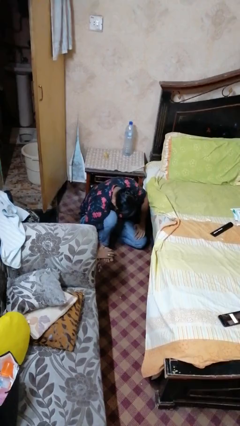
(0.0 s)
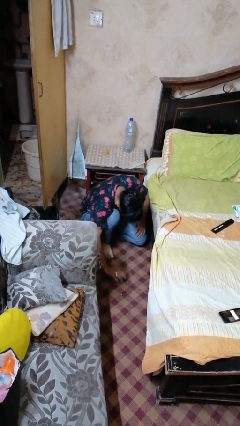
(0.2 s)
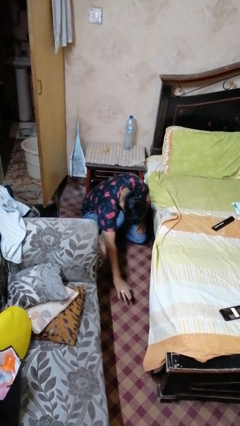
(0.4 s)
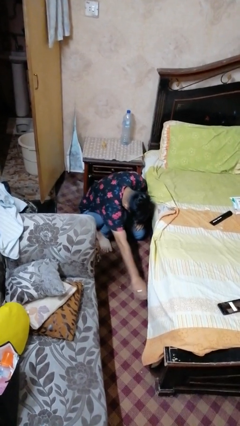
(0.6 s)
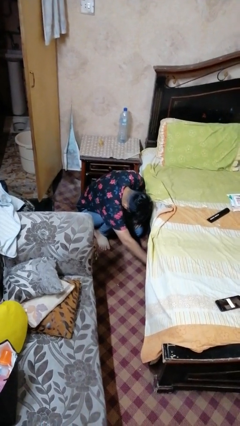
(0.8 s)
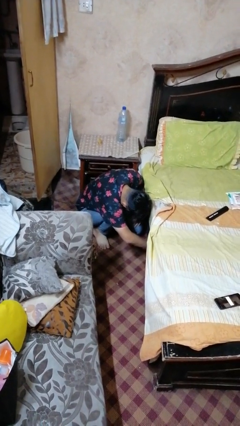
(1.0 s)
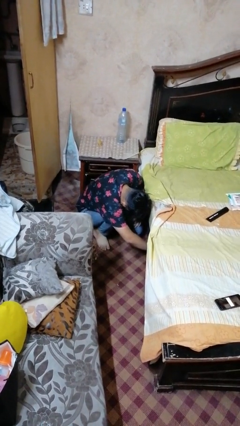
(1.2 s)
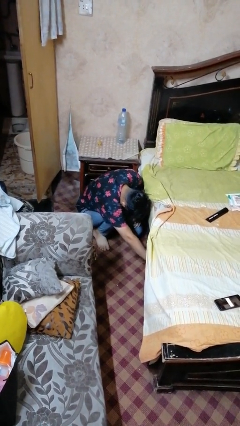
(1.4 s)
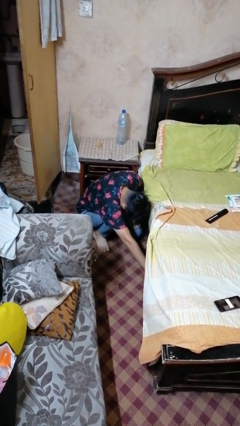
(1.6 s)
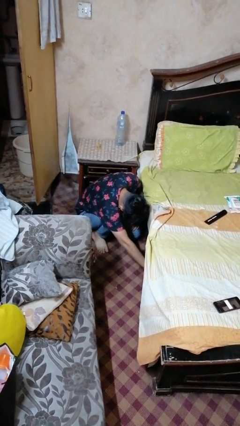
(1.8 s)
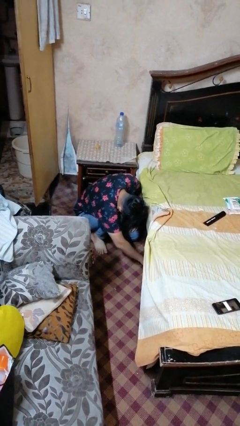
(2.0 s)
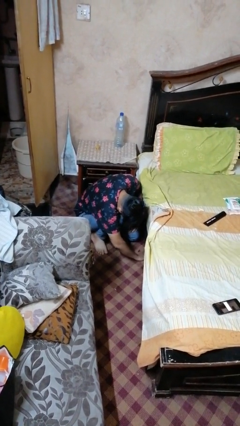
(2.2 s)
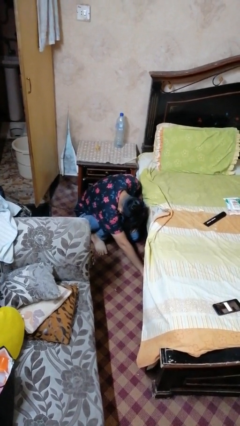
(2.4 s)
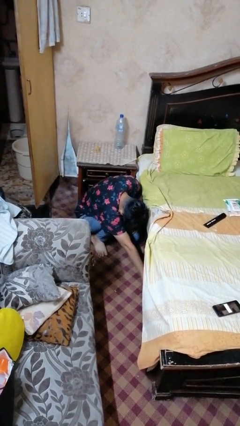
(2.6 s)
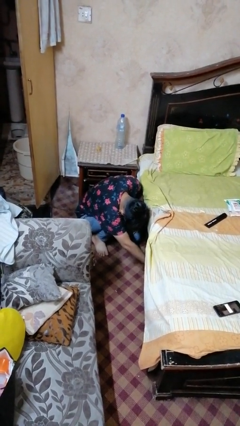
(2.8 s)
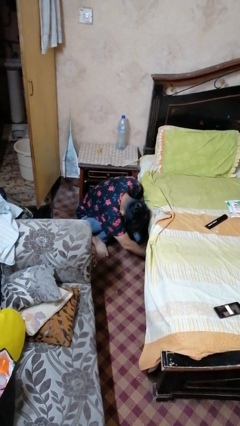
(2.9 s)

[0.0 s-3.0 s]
person searches under bed

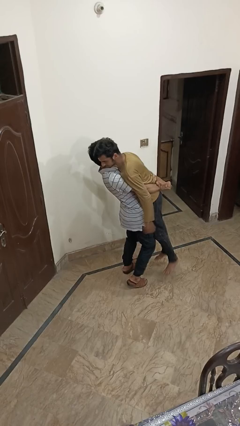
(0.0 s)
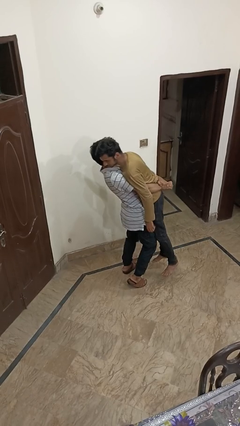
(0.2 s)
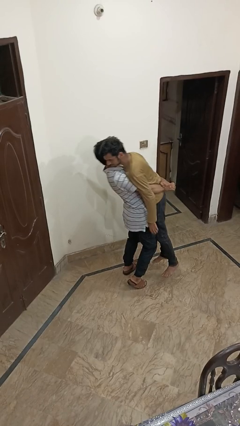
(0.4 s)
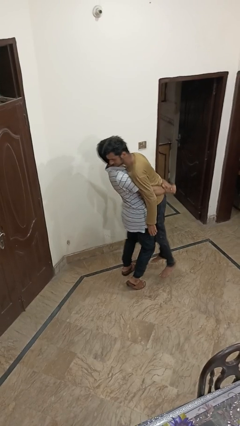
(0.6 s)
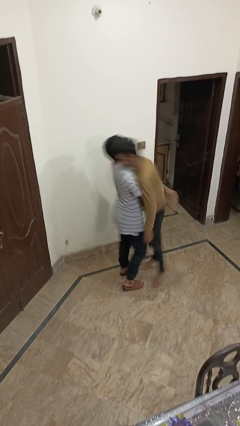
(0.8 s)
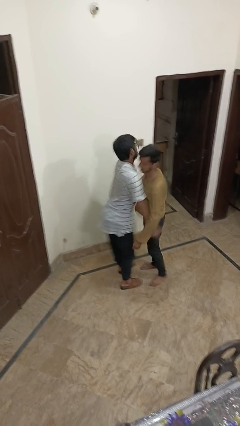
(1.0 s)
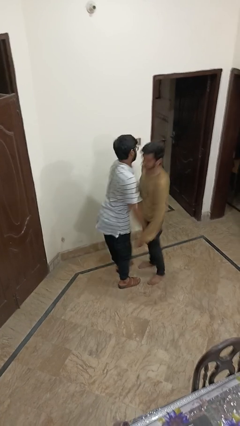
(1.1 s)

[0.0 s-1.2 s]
person puts down person

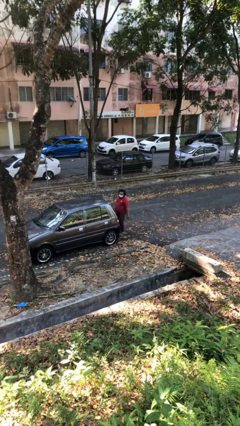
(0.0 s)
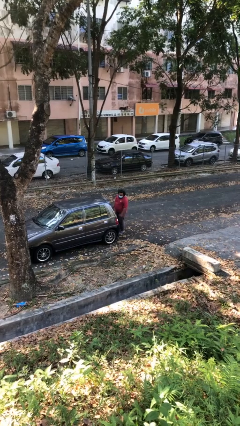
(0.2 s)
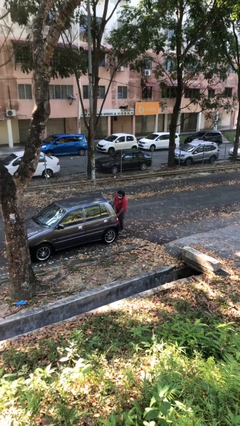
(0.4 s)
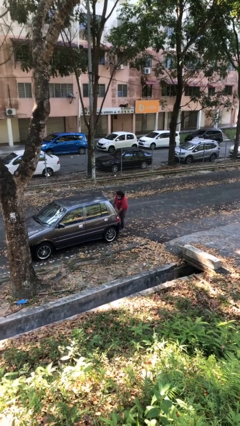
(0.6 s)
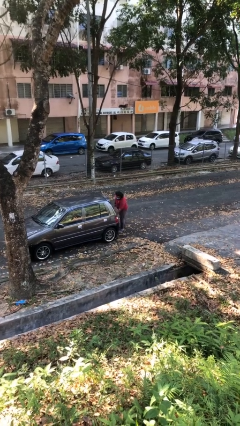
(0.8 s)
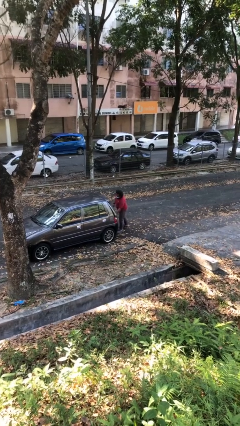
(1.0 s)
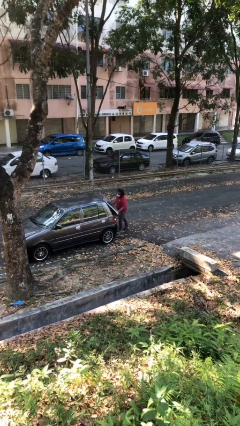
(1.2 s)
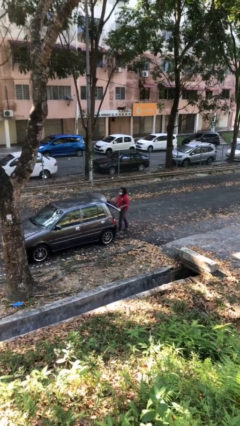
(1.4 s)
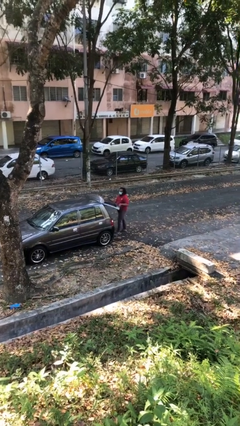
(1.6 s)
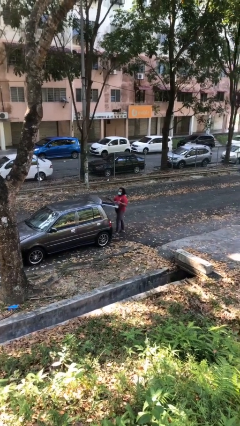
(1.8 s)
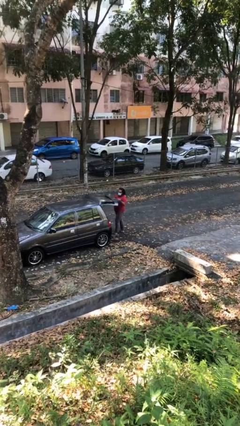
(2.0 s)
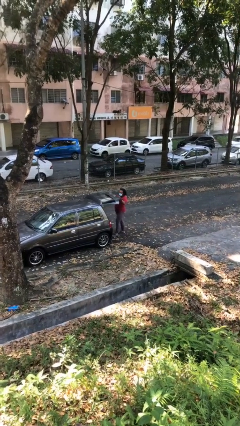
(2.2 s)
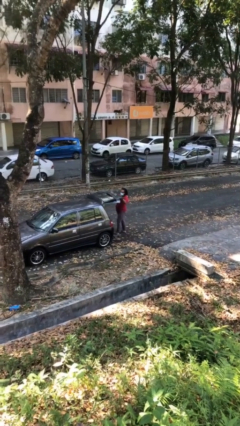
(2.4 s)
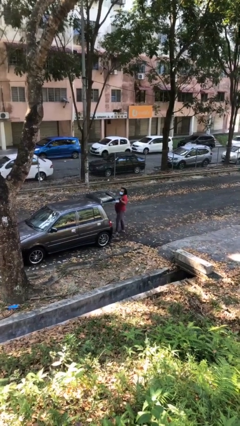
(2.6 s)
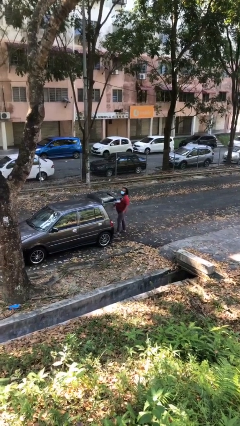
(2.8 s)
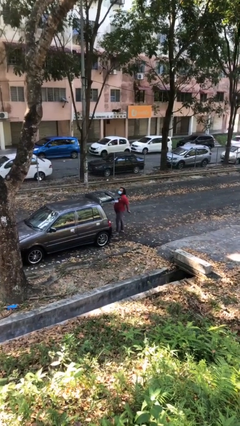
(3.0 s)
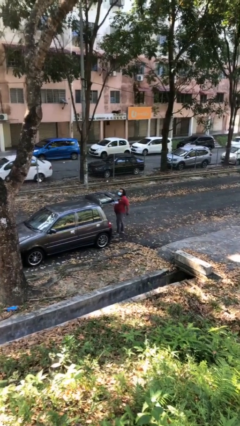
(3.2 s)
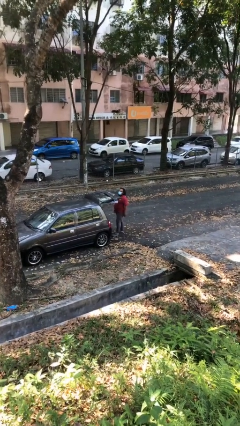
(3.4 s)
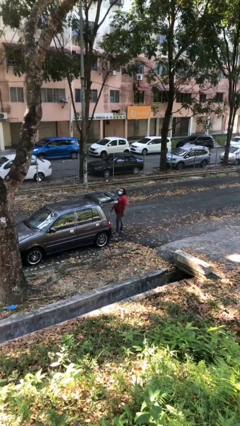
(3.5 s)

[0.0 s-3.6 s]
person opens car trunk

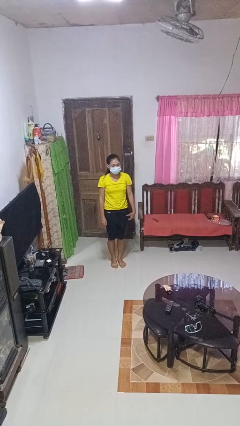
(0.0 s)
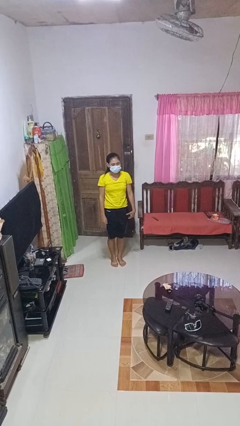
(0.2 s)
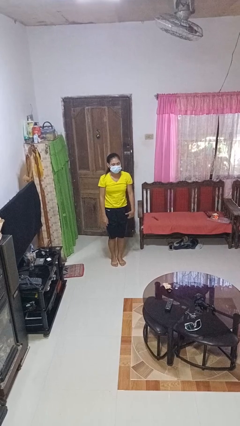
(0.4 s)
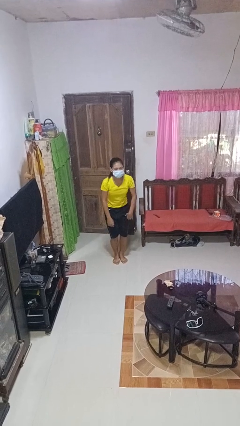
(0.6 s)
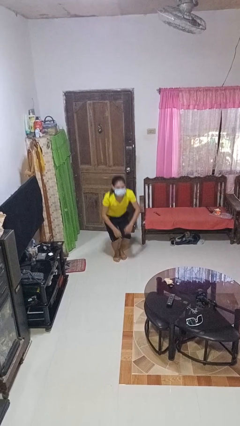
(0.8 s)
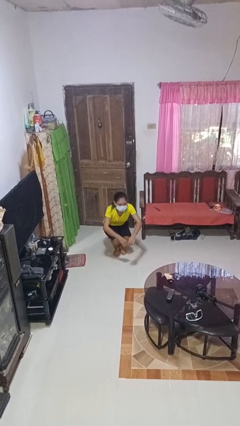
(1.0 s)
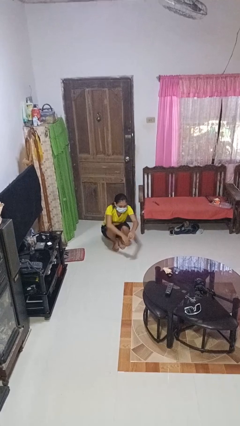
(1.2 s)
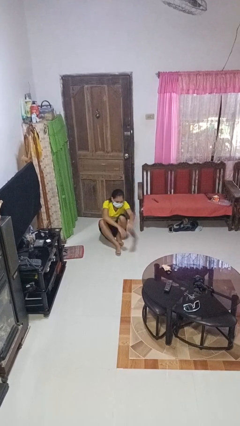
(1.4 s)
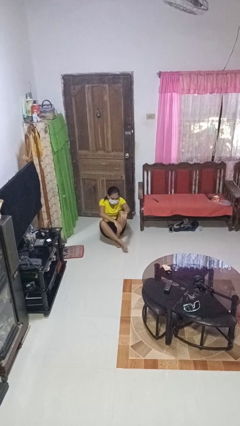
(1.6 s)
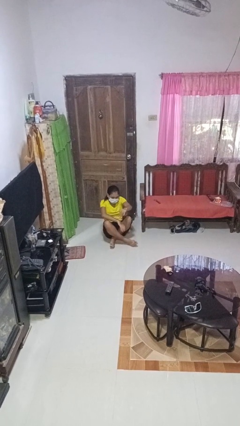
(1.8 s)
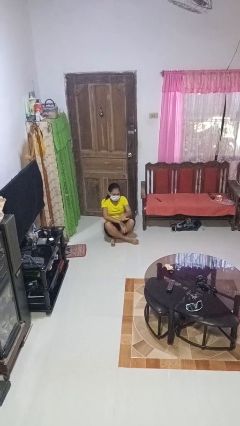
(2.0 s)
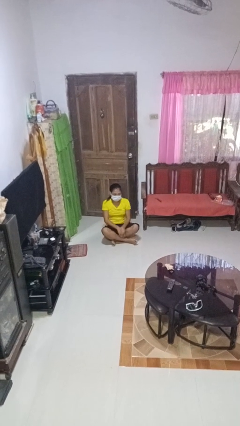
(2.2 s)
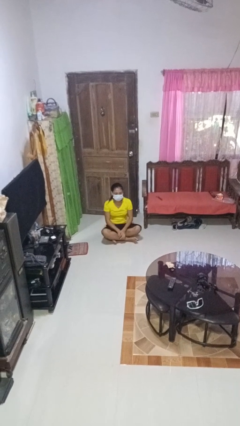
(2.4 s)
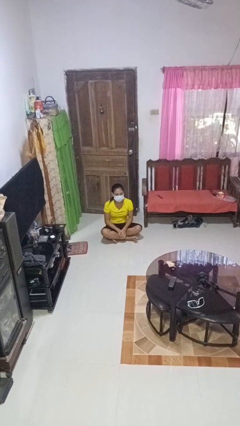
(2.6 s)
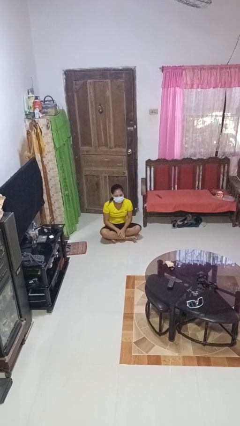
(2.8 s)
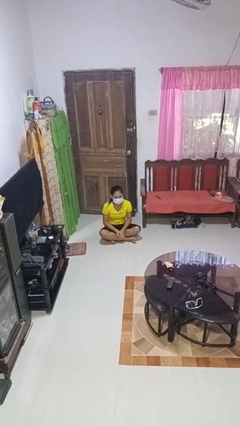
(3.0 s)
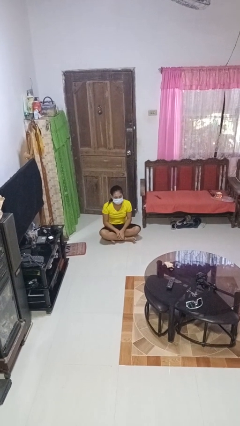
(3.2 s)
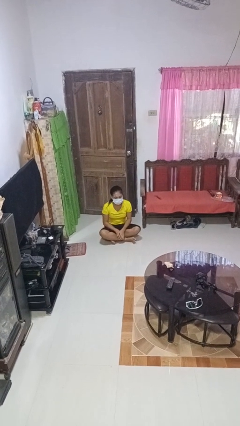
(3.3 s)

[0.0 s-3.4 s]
person sits crisscross

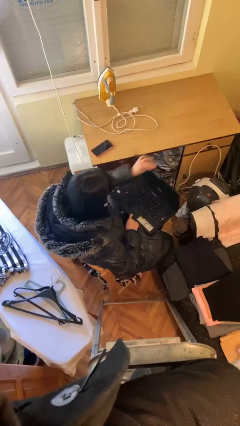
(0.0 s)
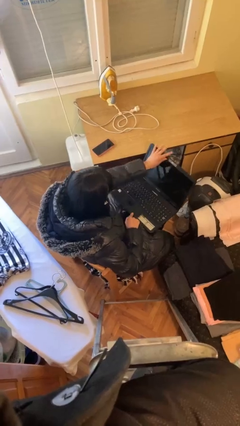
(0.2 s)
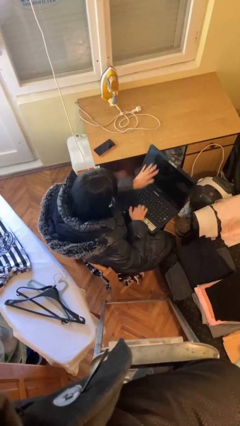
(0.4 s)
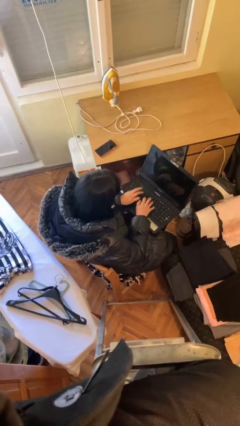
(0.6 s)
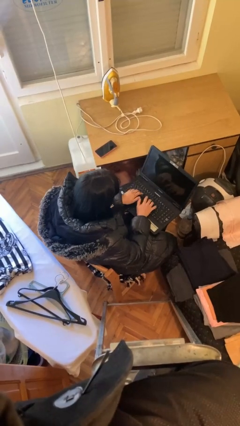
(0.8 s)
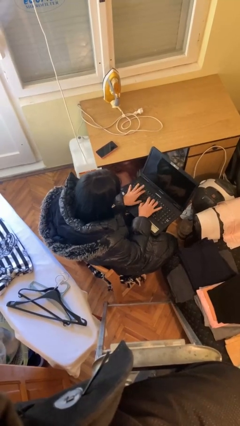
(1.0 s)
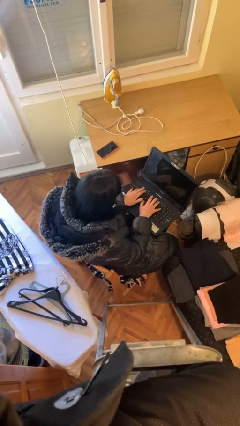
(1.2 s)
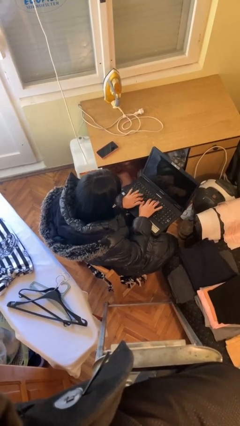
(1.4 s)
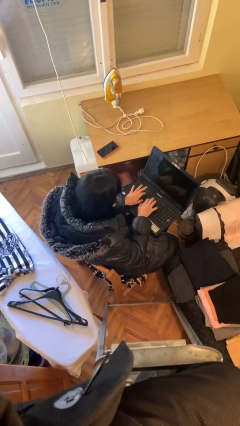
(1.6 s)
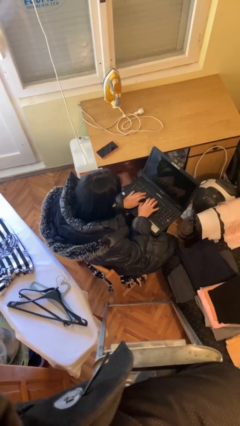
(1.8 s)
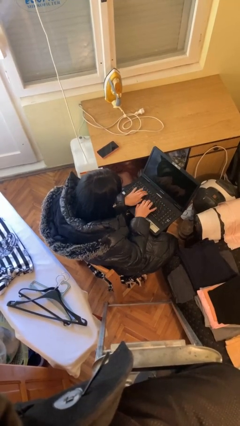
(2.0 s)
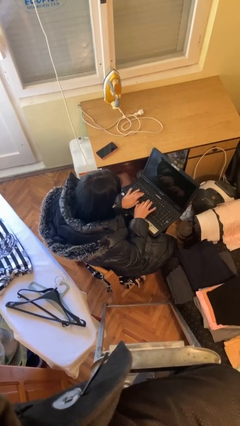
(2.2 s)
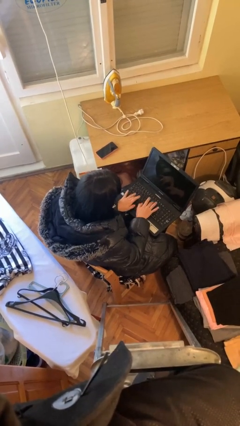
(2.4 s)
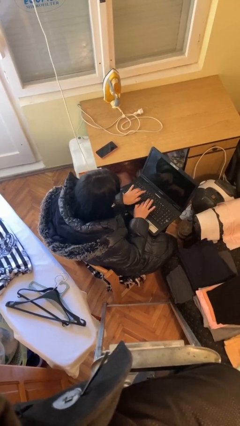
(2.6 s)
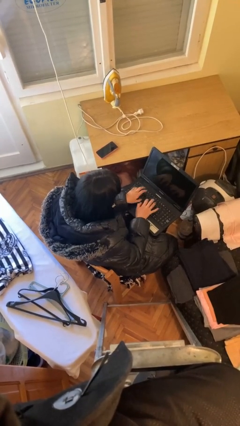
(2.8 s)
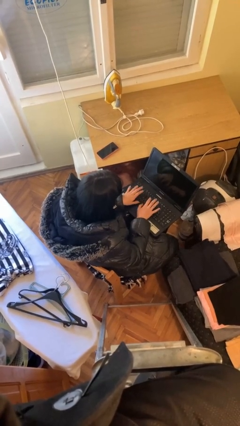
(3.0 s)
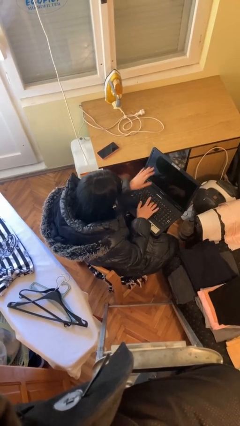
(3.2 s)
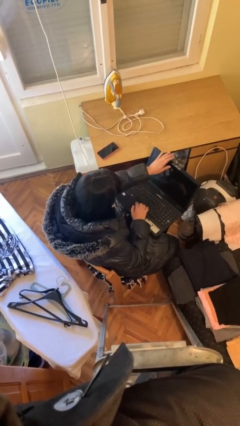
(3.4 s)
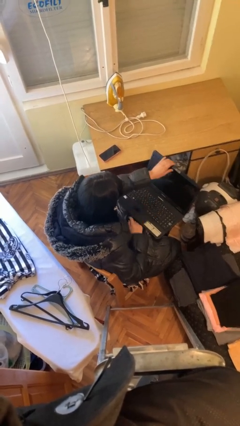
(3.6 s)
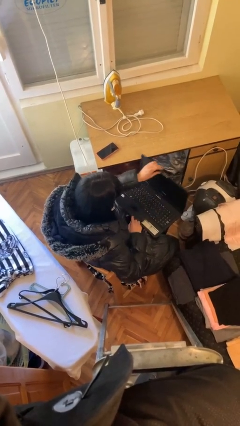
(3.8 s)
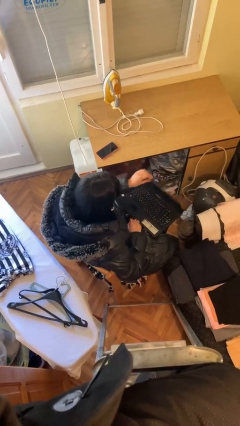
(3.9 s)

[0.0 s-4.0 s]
person interacts with laptop

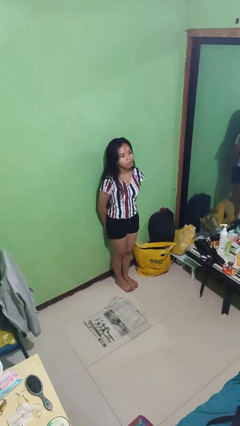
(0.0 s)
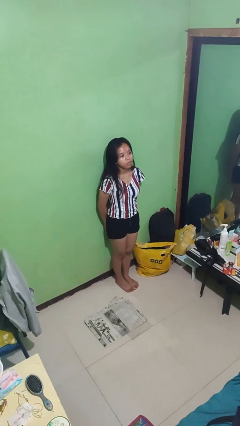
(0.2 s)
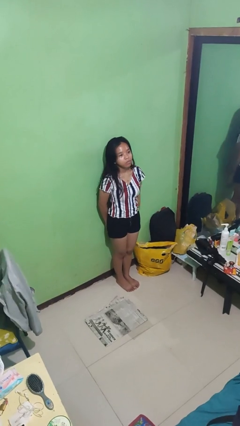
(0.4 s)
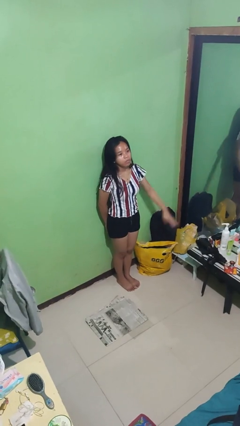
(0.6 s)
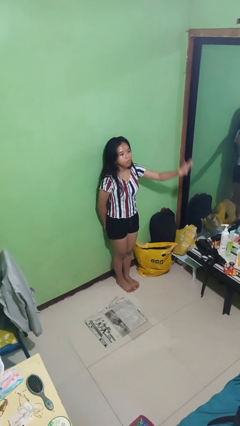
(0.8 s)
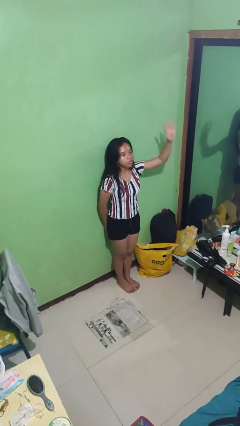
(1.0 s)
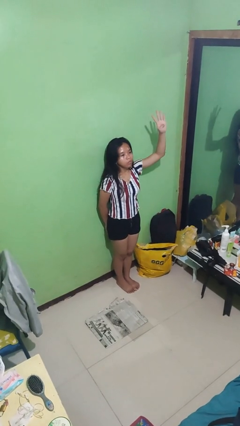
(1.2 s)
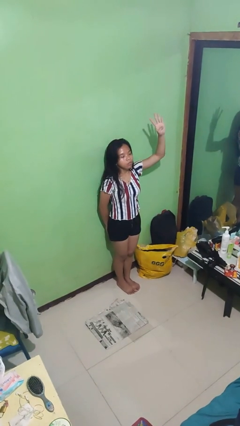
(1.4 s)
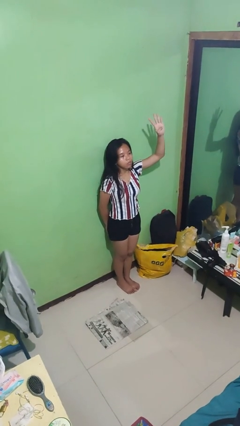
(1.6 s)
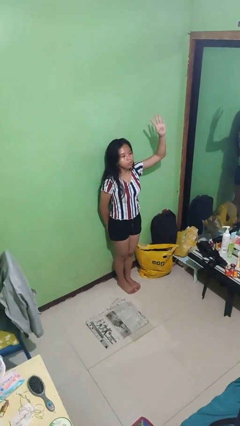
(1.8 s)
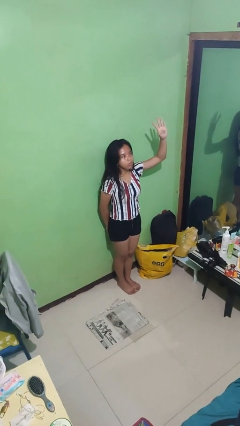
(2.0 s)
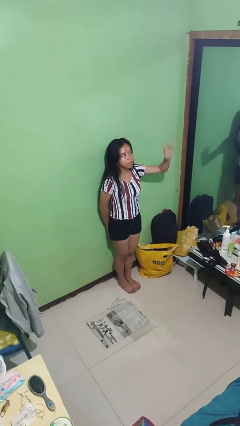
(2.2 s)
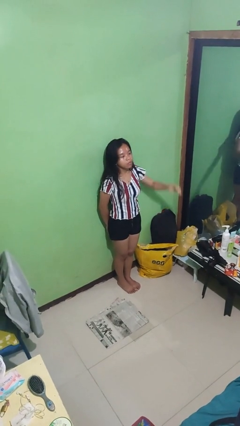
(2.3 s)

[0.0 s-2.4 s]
person gestures number four

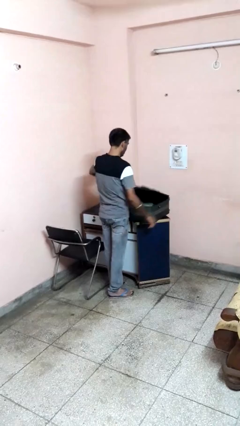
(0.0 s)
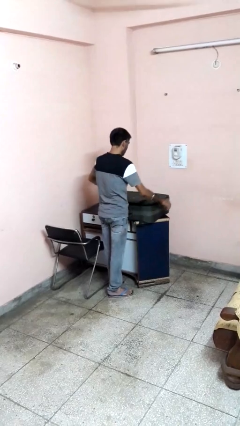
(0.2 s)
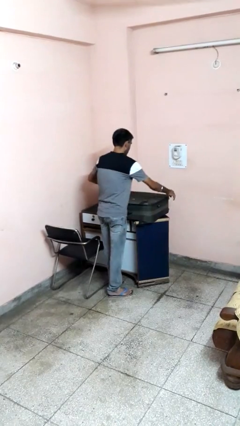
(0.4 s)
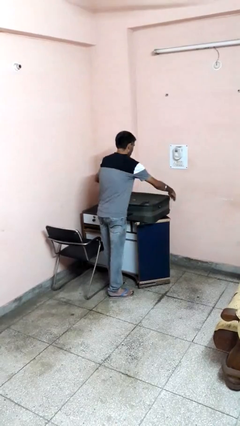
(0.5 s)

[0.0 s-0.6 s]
person closes suitcase
